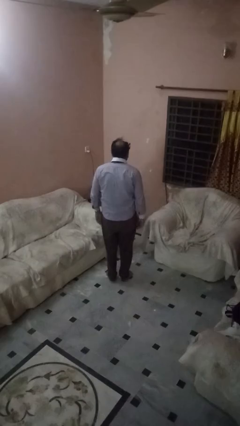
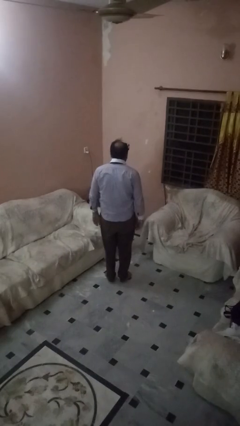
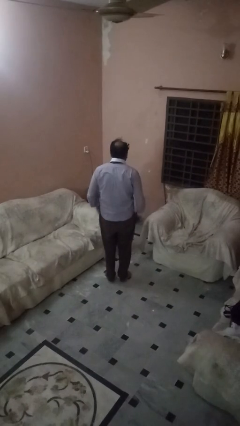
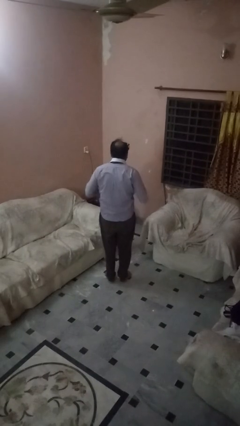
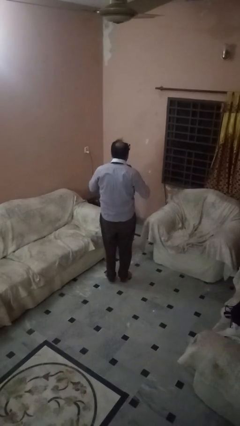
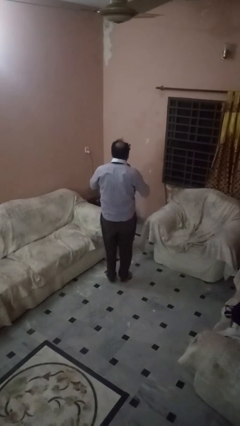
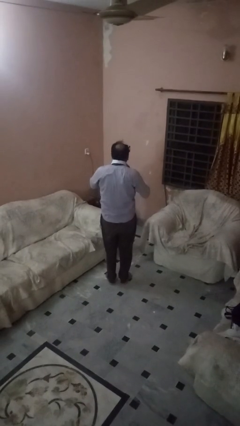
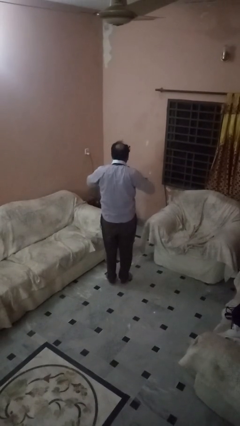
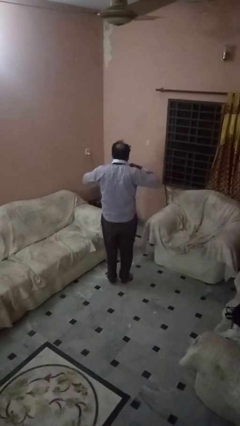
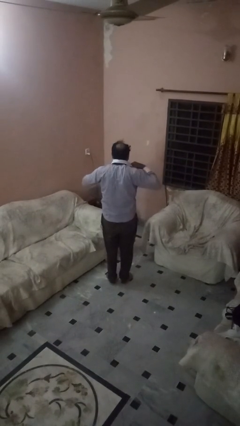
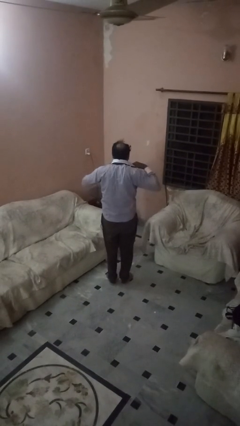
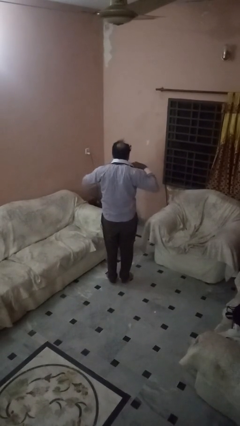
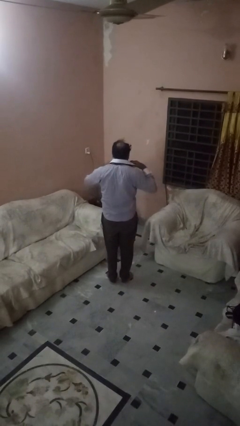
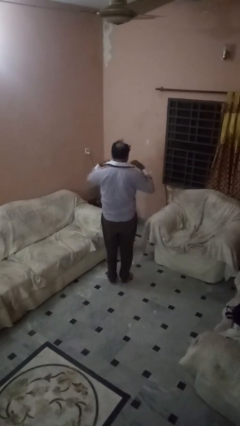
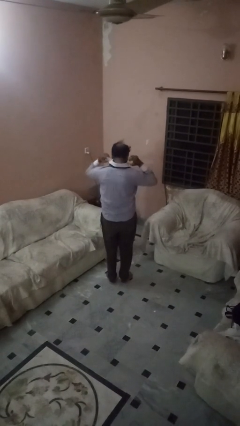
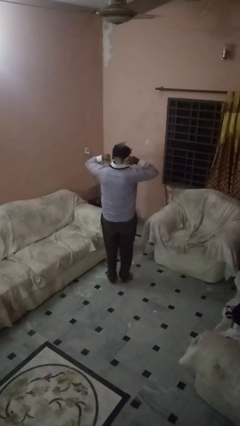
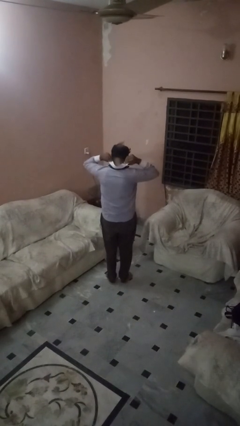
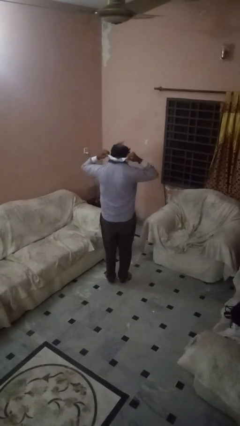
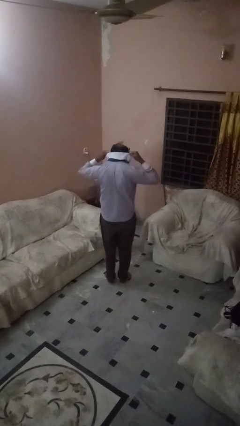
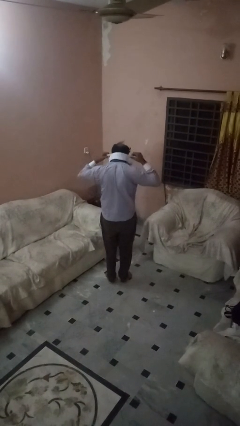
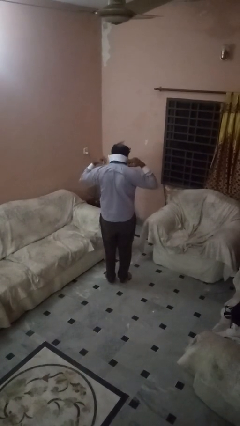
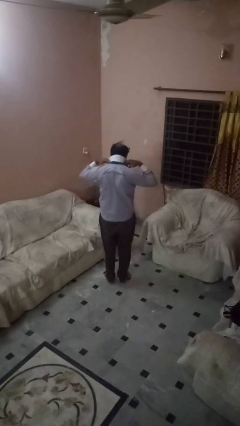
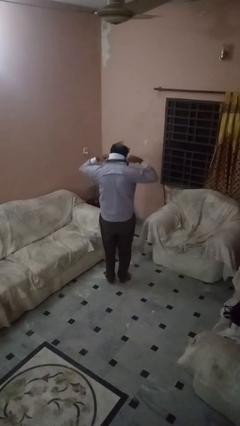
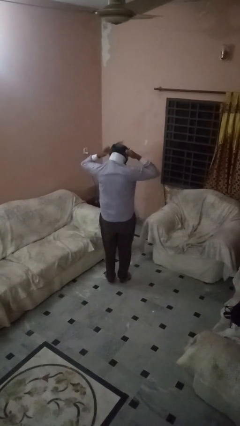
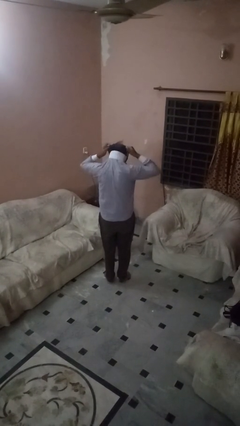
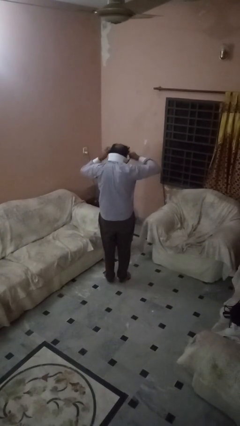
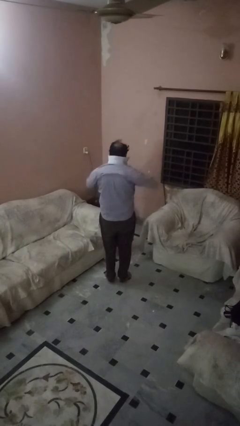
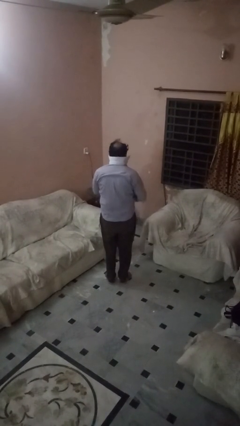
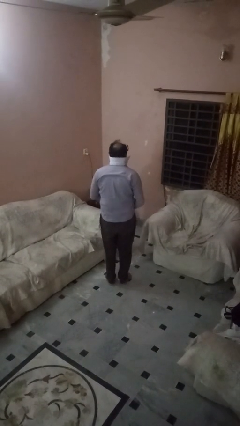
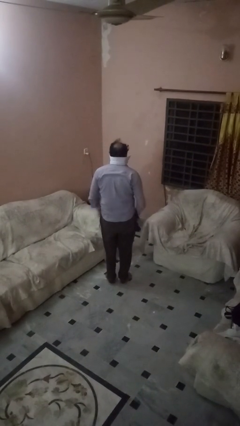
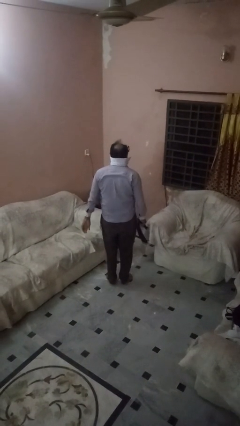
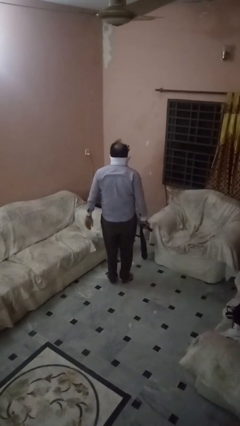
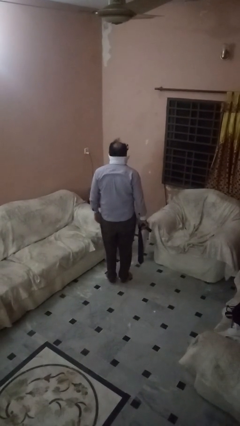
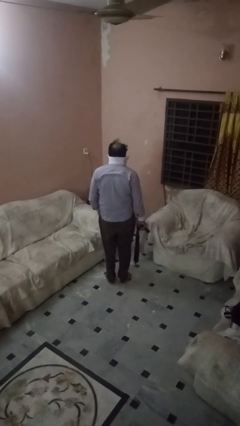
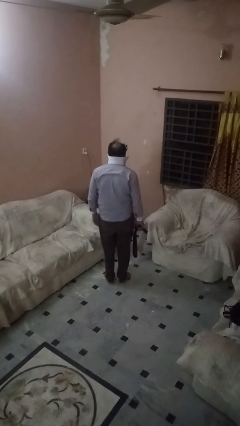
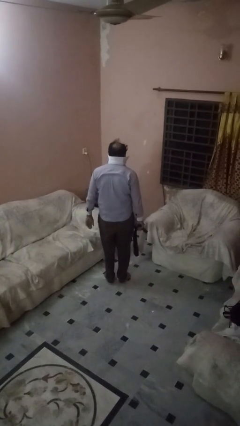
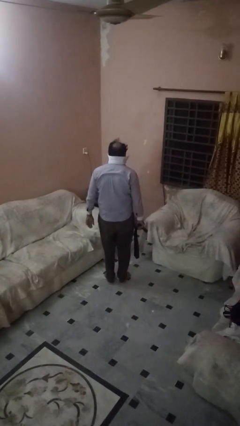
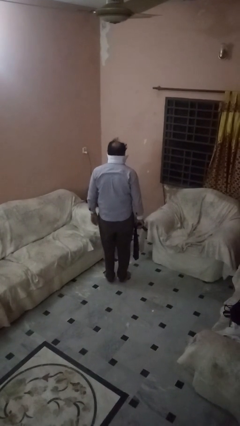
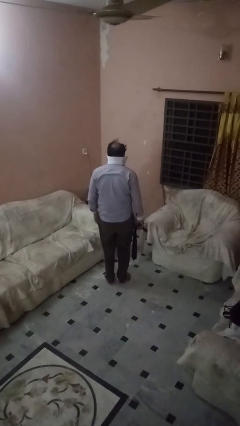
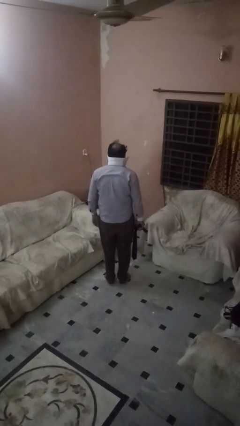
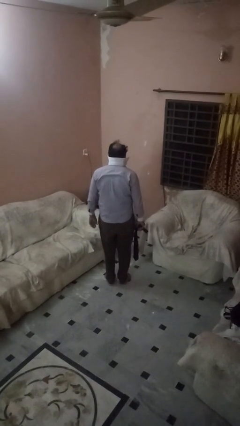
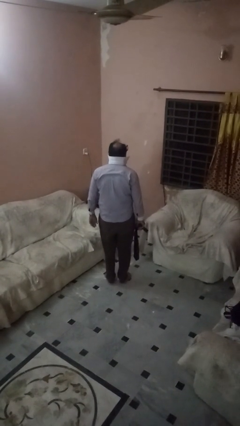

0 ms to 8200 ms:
person takes off necktie

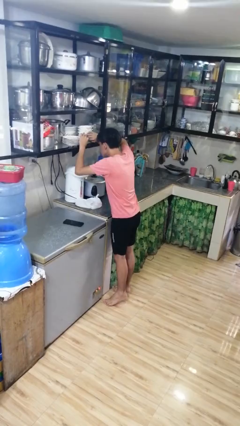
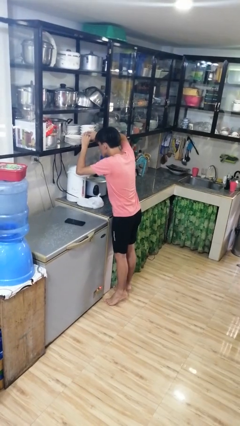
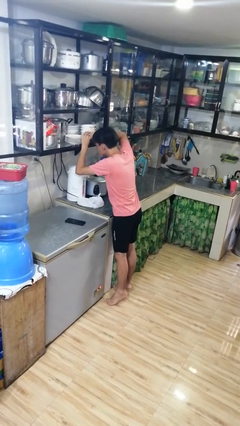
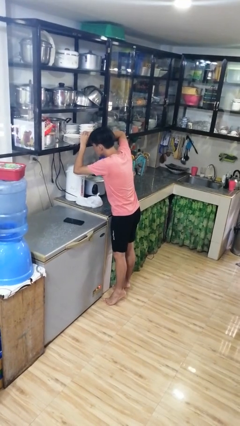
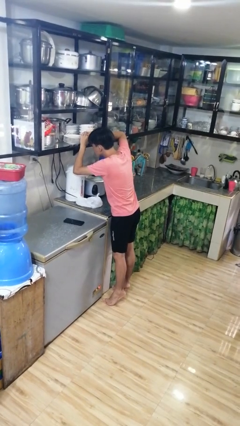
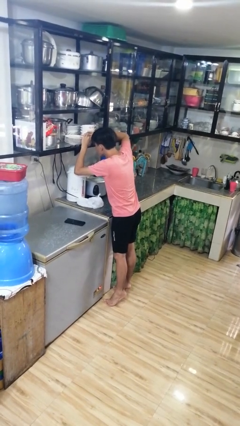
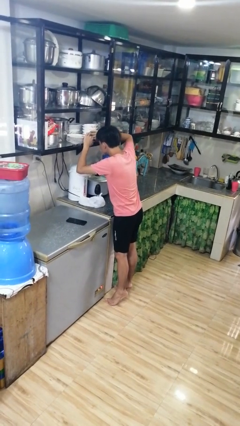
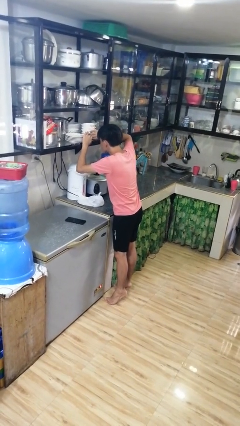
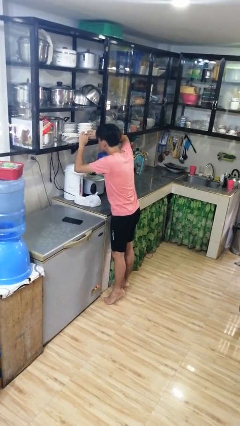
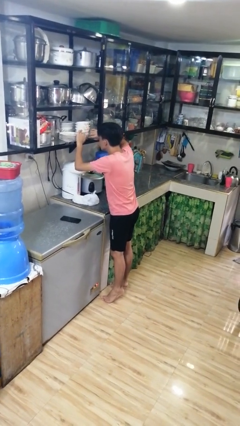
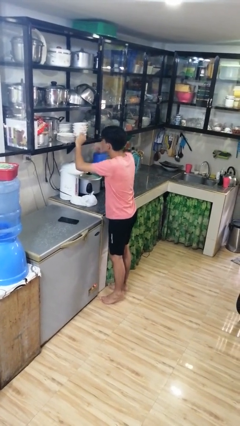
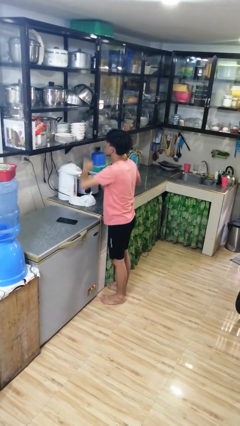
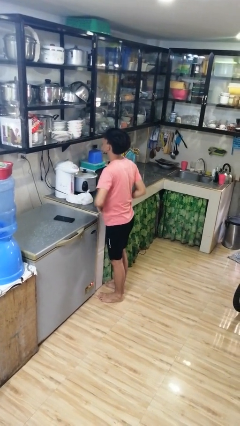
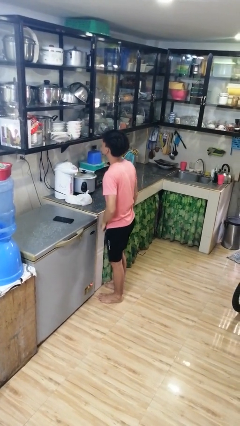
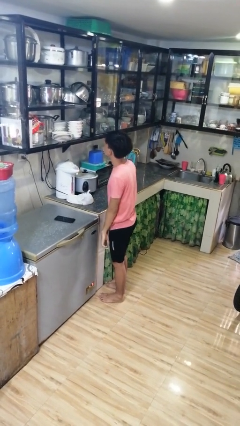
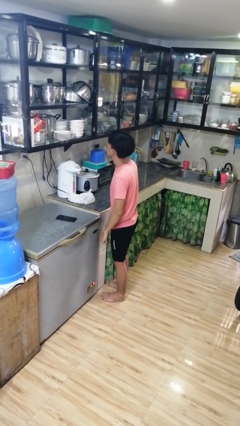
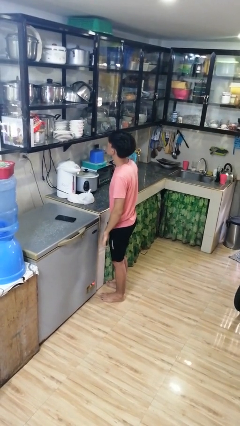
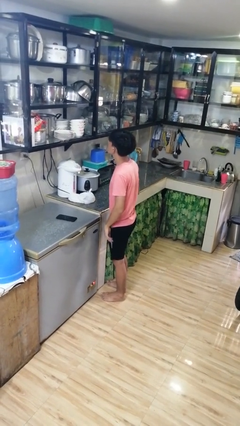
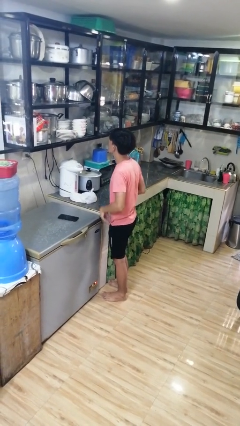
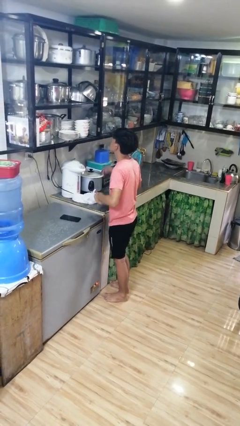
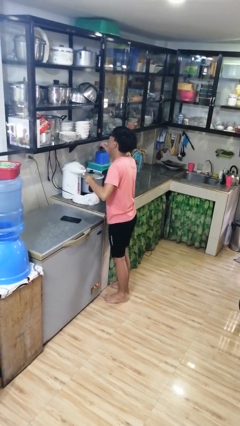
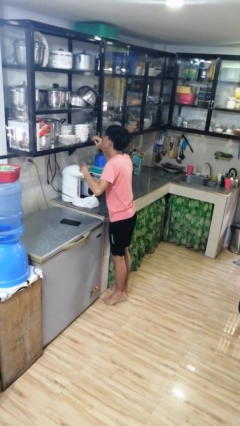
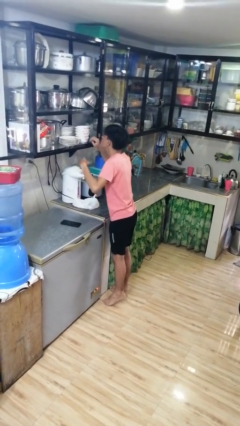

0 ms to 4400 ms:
person puts on backpack

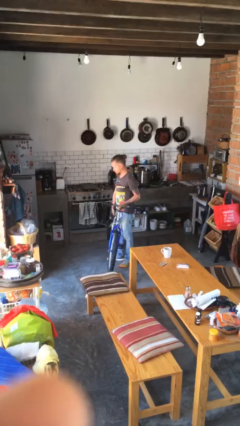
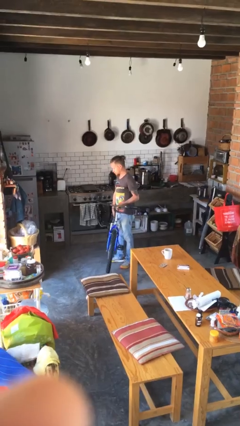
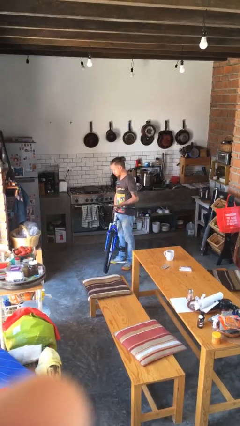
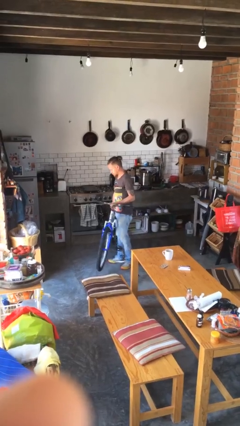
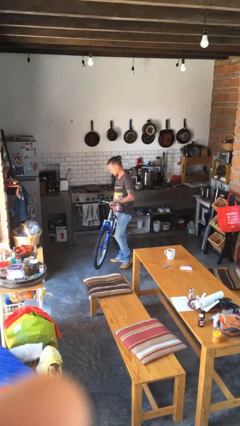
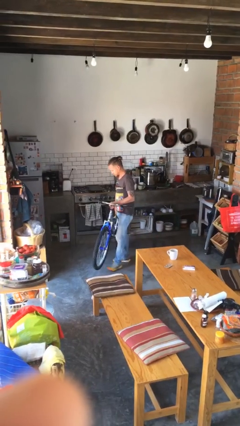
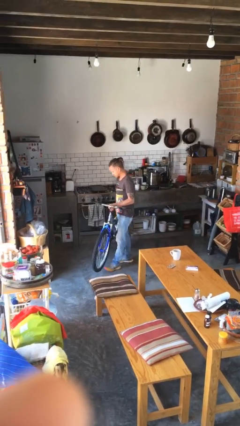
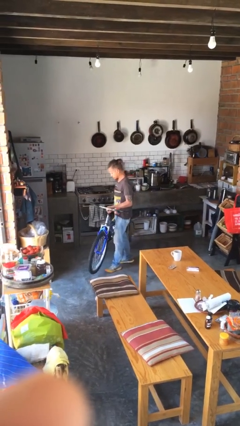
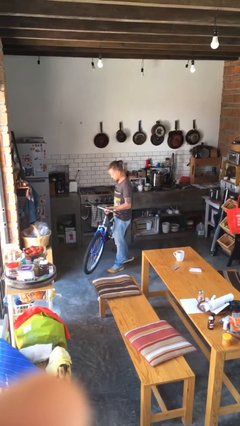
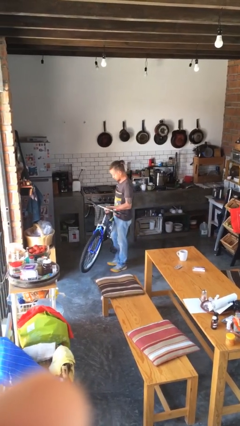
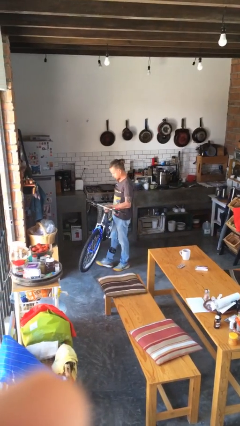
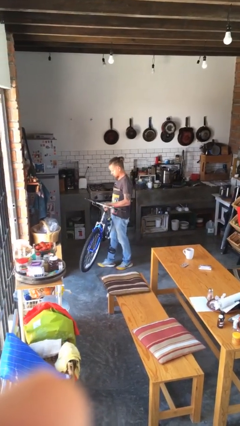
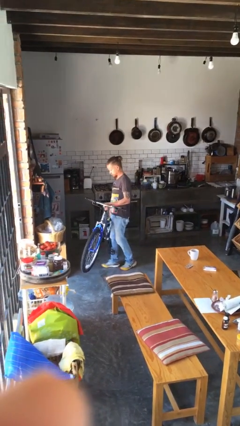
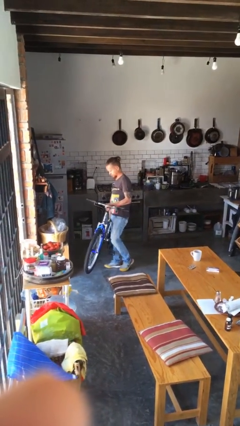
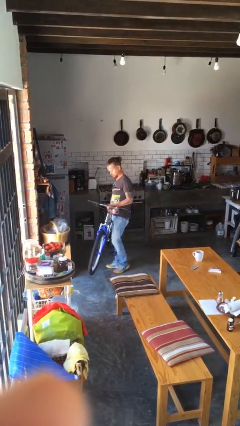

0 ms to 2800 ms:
person carries bicycle

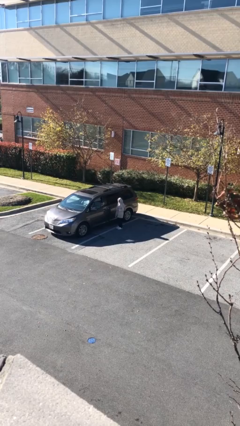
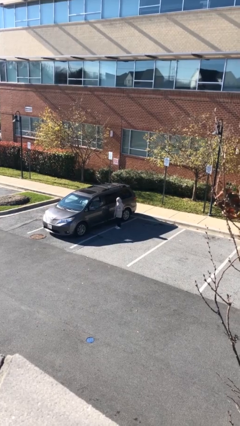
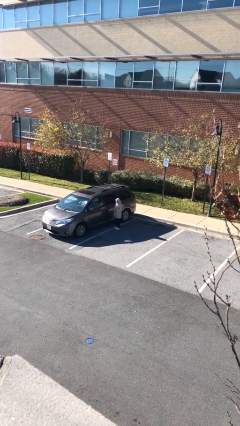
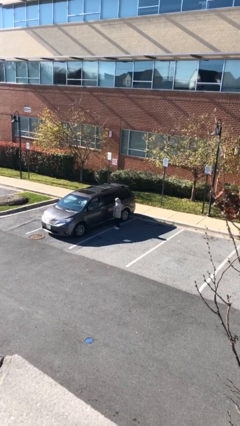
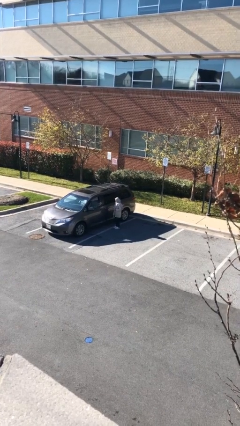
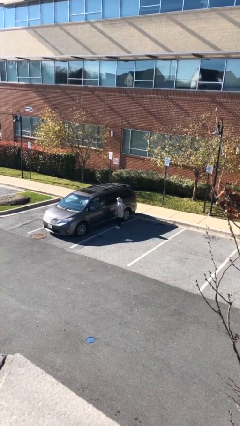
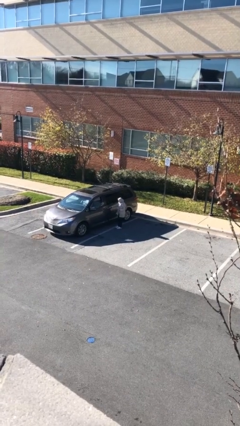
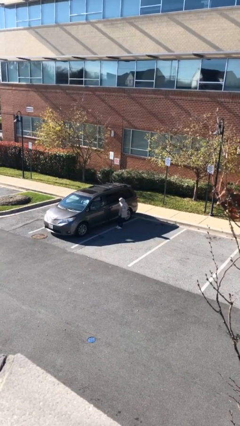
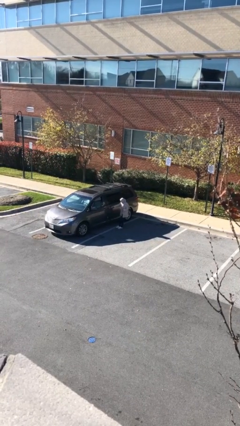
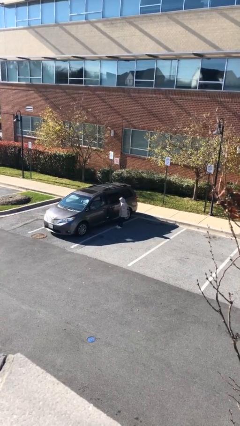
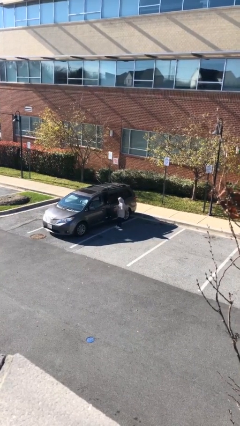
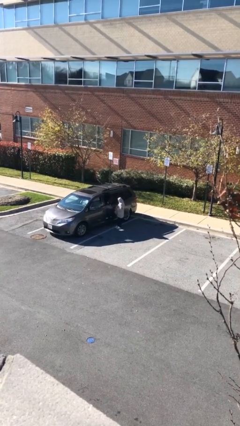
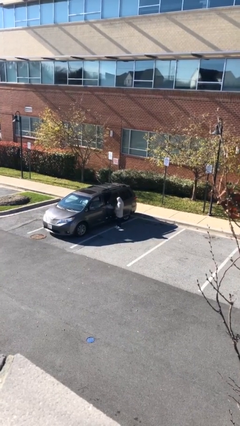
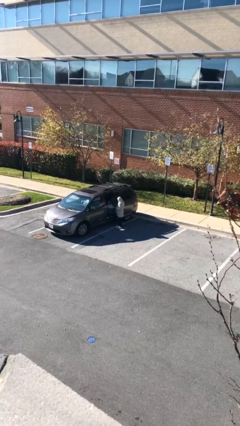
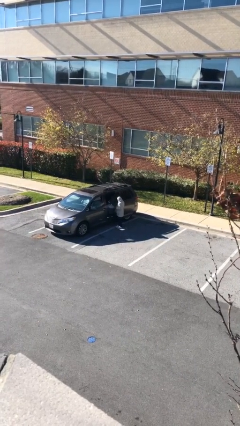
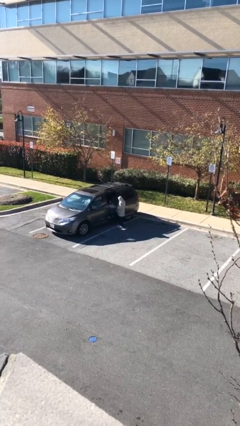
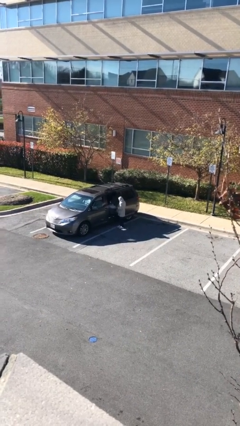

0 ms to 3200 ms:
person opens car door
